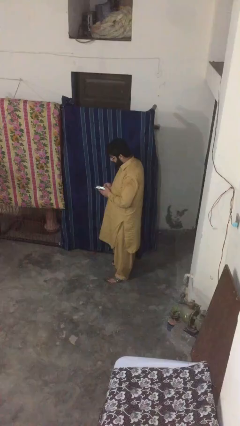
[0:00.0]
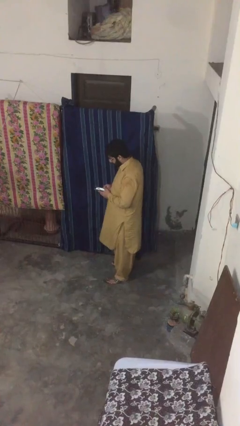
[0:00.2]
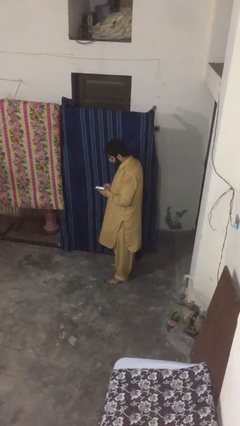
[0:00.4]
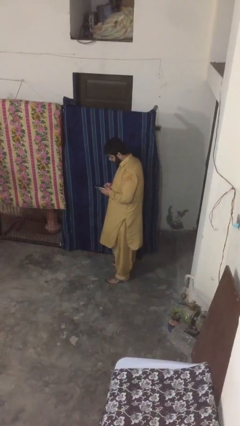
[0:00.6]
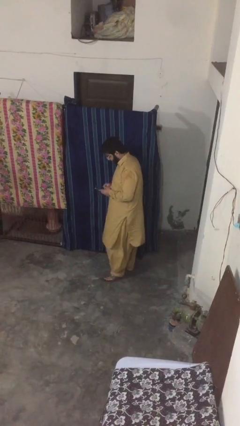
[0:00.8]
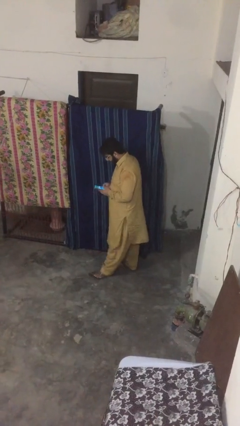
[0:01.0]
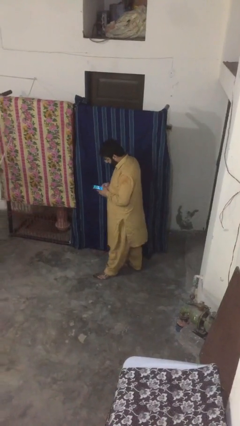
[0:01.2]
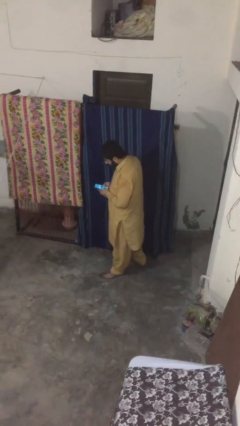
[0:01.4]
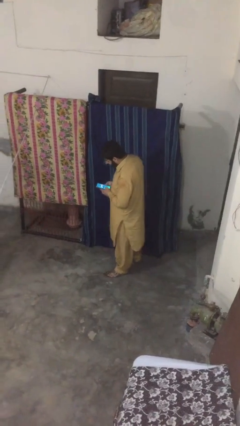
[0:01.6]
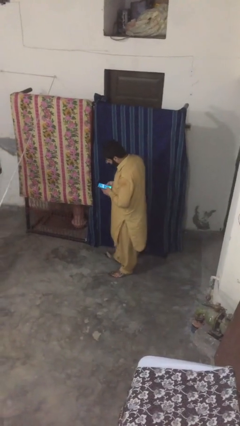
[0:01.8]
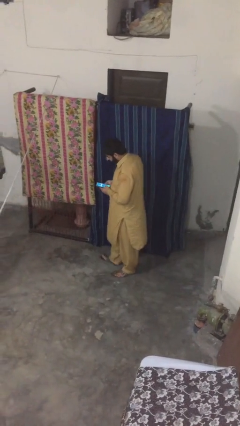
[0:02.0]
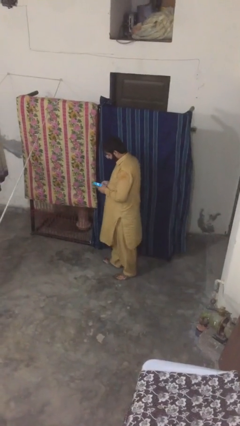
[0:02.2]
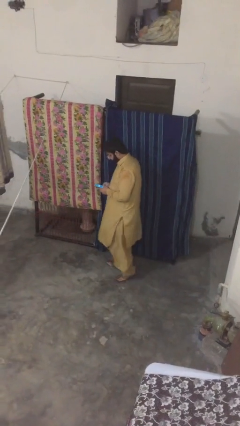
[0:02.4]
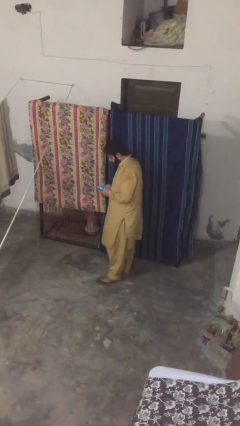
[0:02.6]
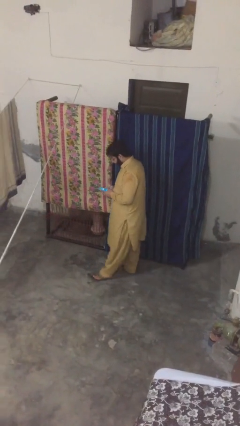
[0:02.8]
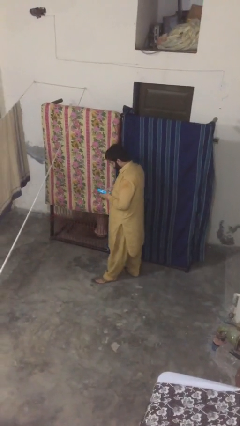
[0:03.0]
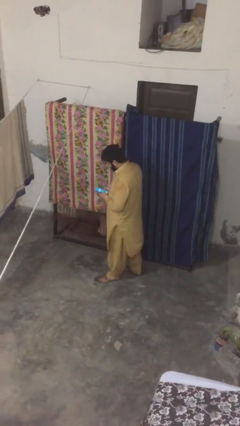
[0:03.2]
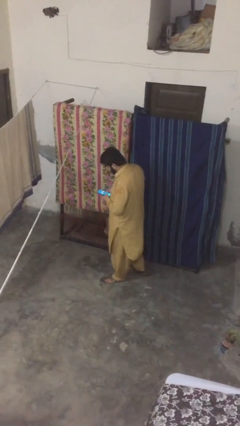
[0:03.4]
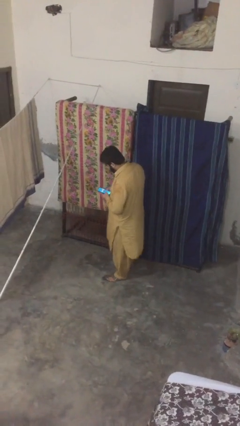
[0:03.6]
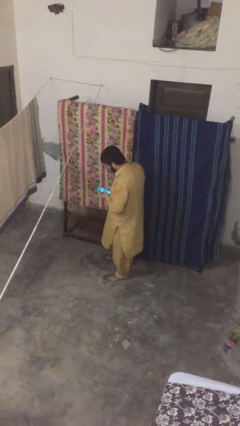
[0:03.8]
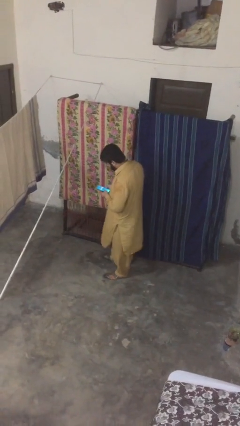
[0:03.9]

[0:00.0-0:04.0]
person texts on phone

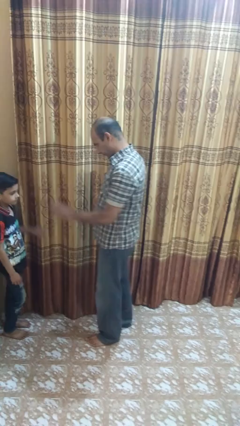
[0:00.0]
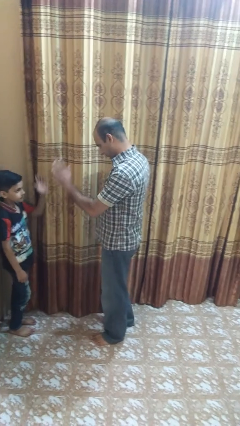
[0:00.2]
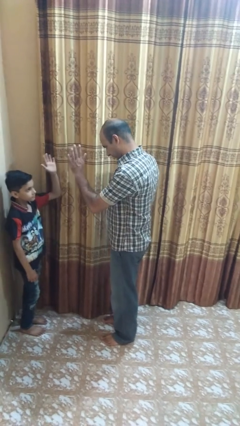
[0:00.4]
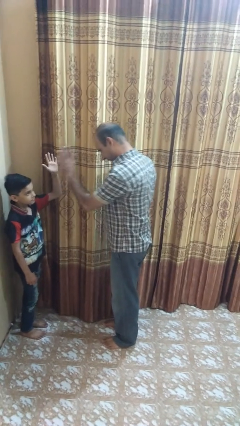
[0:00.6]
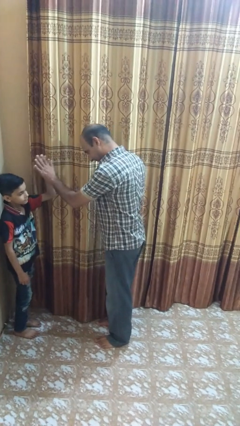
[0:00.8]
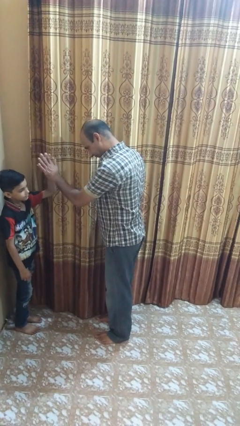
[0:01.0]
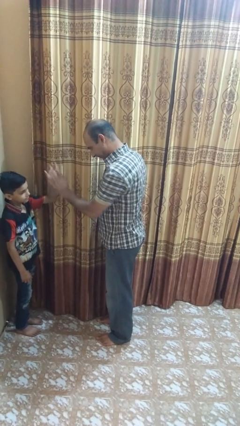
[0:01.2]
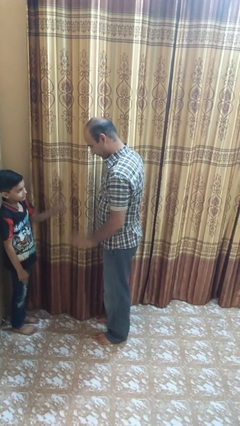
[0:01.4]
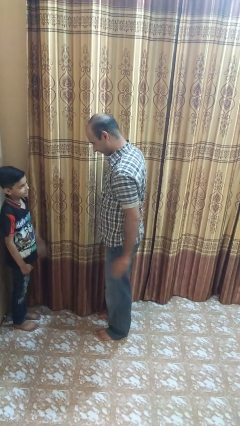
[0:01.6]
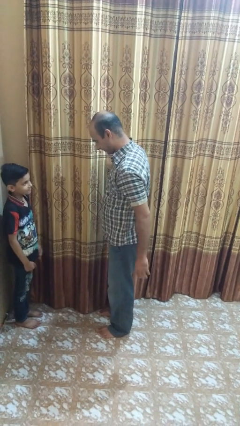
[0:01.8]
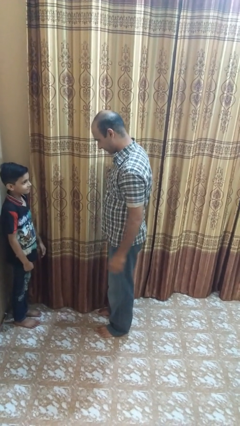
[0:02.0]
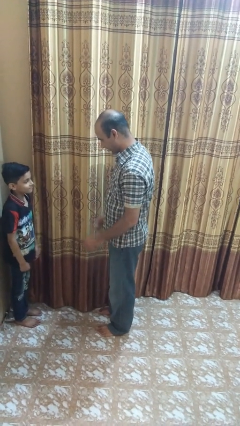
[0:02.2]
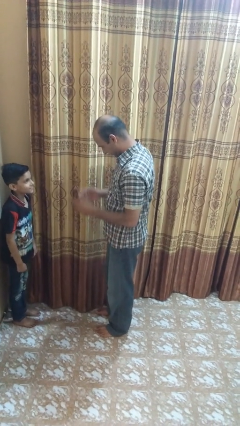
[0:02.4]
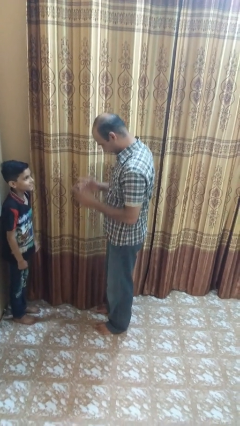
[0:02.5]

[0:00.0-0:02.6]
person highfives hand

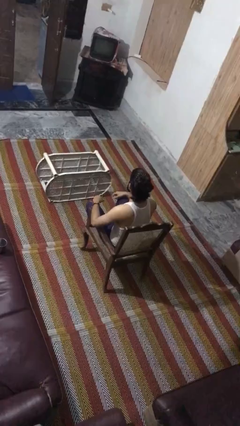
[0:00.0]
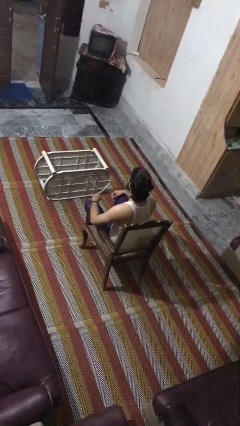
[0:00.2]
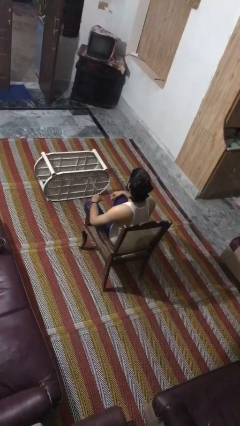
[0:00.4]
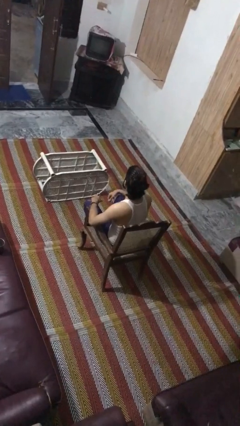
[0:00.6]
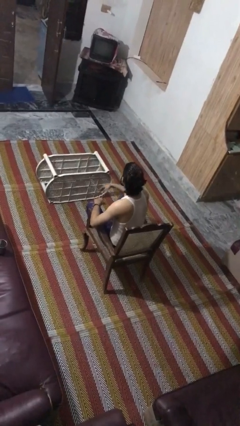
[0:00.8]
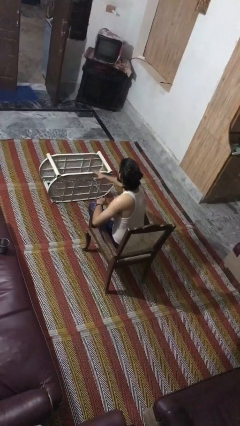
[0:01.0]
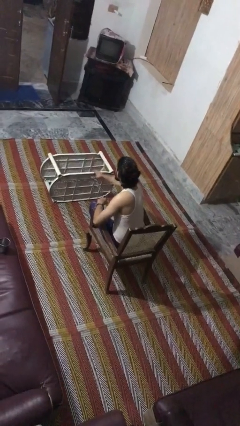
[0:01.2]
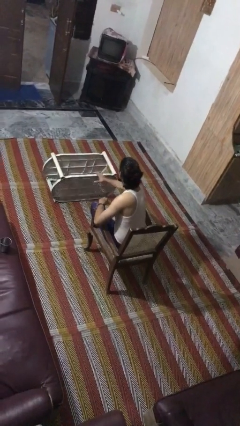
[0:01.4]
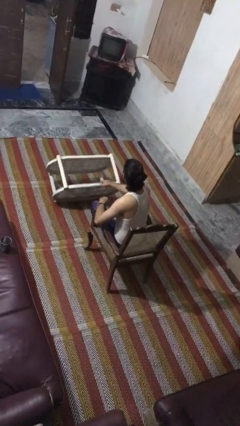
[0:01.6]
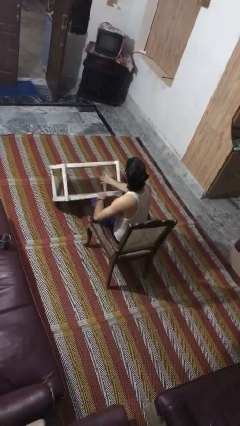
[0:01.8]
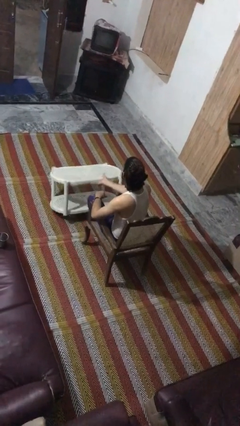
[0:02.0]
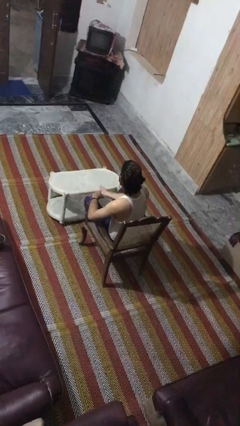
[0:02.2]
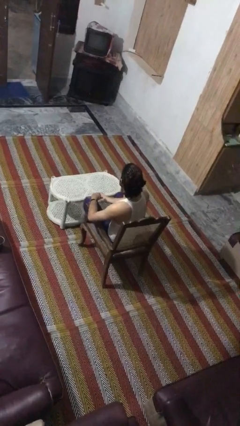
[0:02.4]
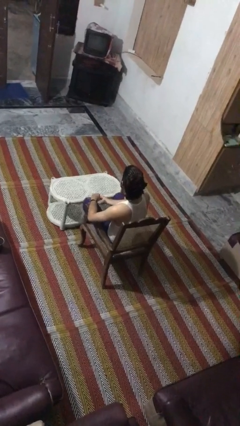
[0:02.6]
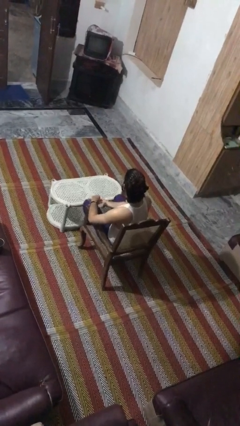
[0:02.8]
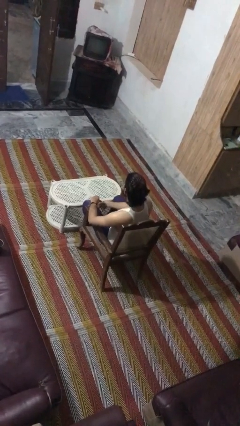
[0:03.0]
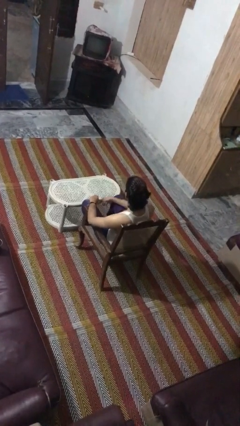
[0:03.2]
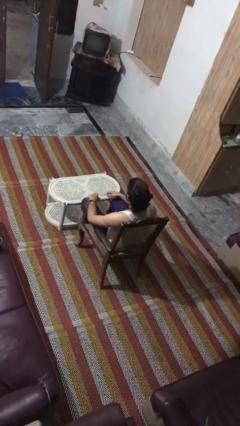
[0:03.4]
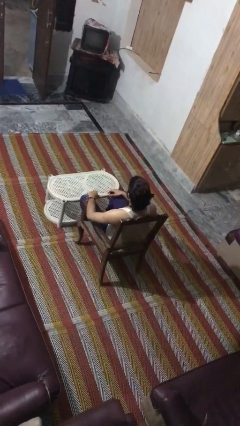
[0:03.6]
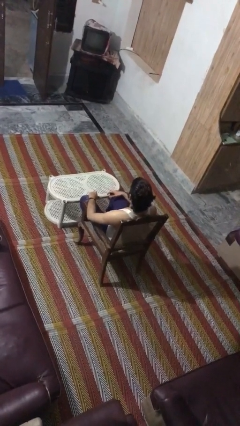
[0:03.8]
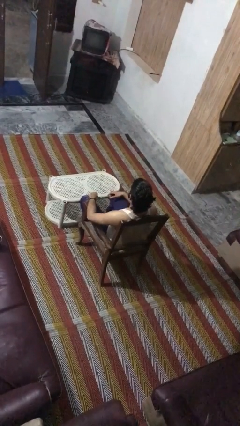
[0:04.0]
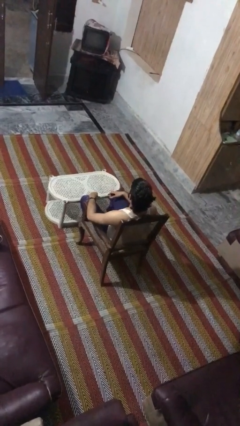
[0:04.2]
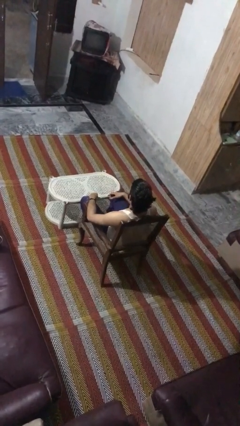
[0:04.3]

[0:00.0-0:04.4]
person sets upright furniture

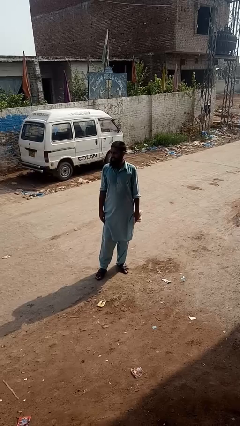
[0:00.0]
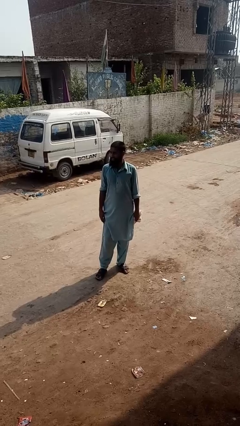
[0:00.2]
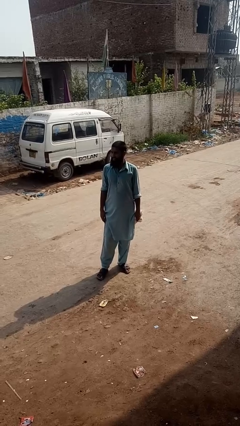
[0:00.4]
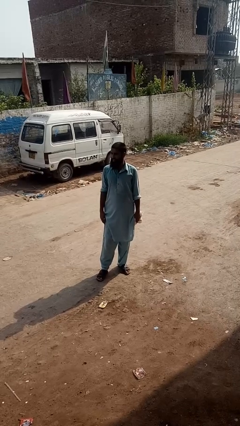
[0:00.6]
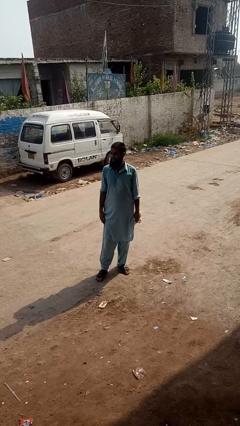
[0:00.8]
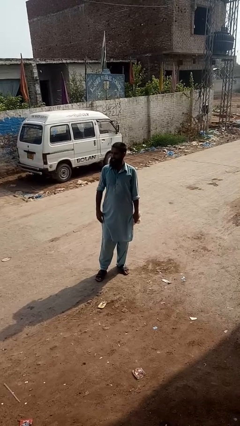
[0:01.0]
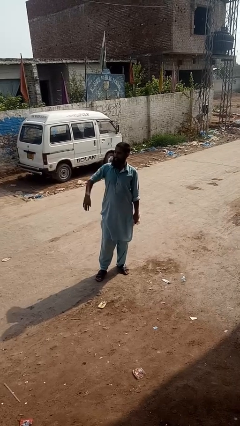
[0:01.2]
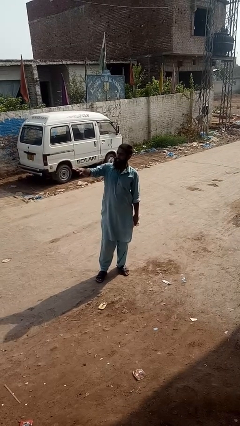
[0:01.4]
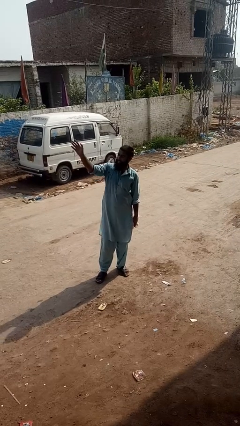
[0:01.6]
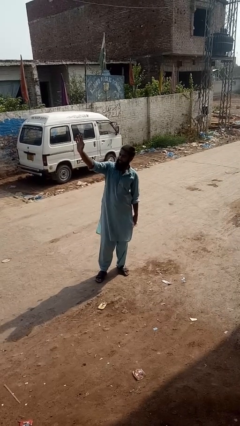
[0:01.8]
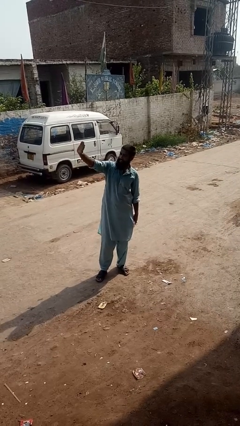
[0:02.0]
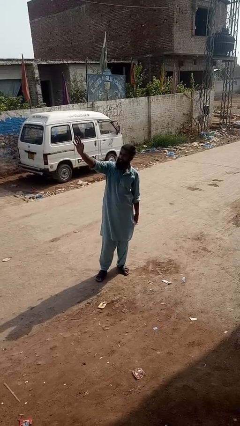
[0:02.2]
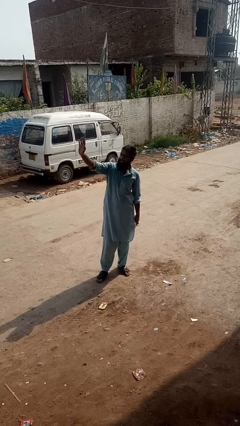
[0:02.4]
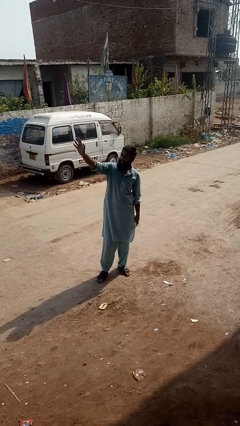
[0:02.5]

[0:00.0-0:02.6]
person waves at person

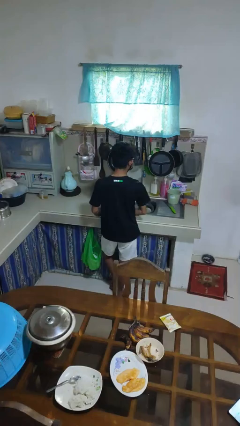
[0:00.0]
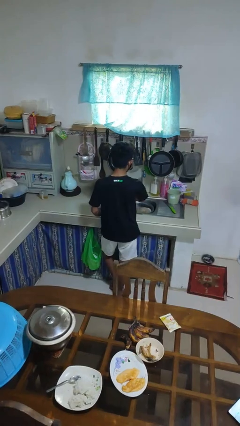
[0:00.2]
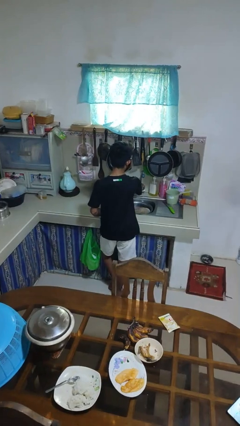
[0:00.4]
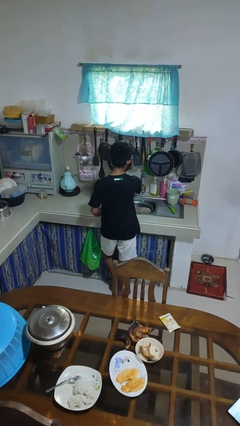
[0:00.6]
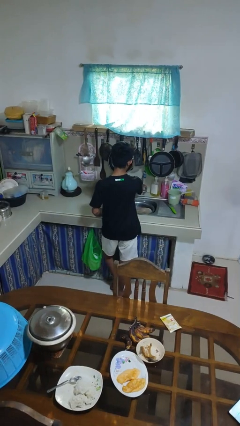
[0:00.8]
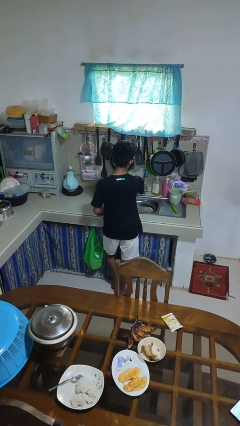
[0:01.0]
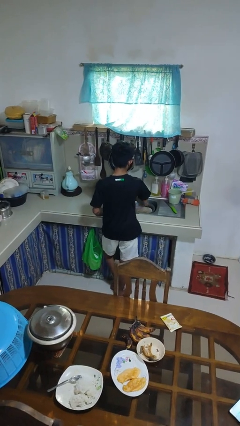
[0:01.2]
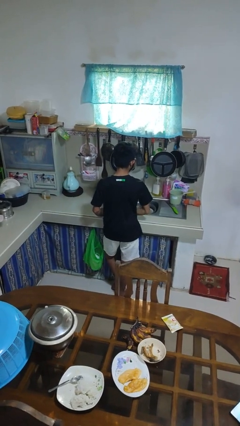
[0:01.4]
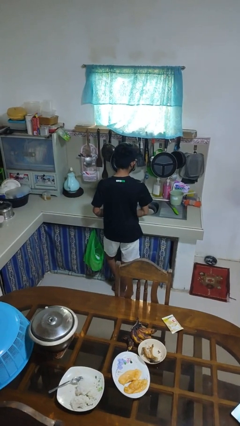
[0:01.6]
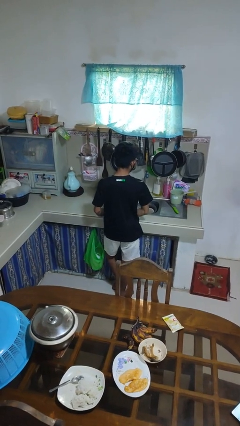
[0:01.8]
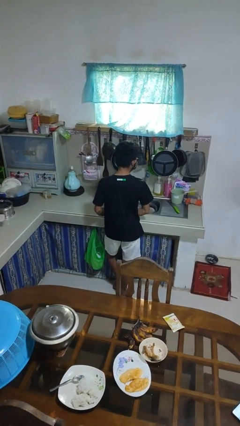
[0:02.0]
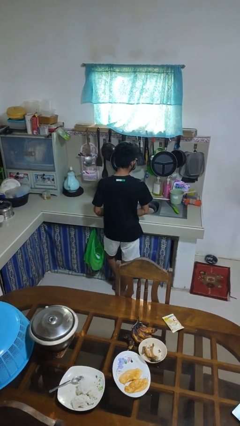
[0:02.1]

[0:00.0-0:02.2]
person opens clothes washer

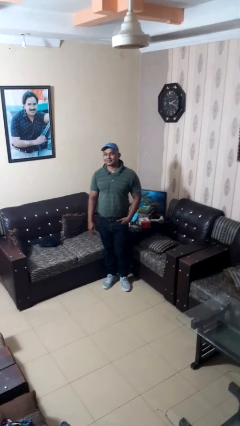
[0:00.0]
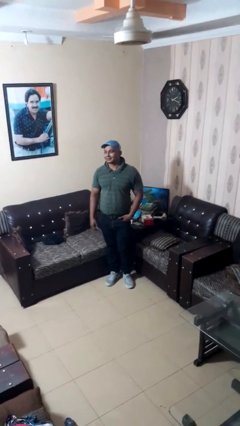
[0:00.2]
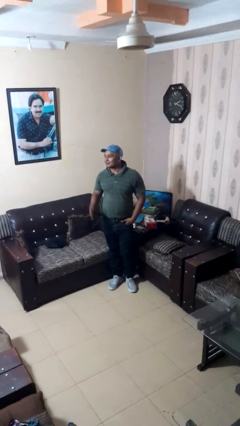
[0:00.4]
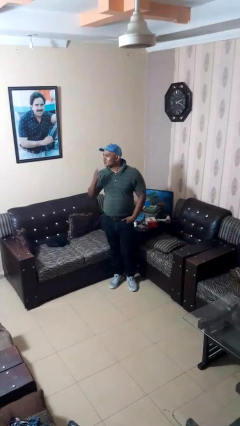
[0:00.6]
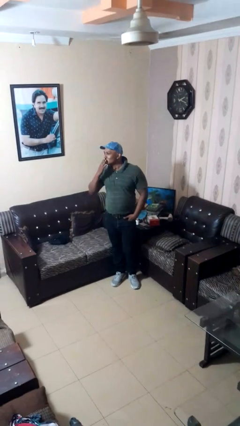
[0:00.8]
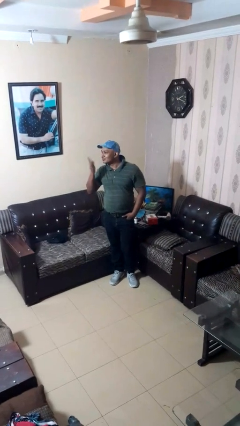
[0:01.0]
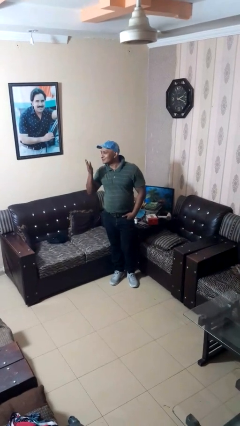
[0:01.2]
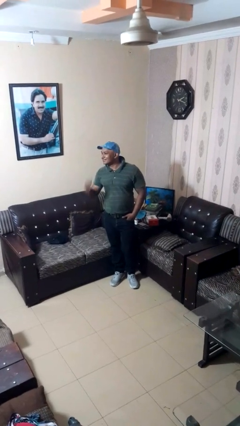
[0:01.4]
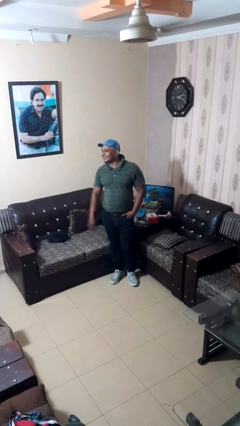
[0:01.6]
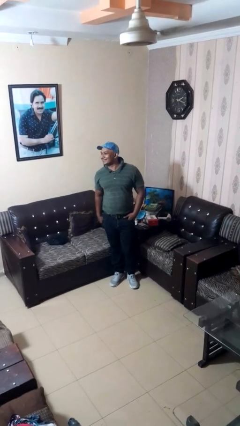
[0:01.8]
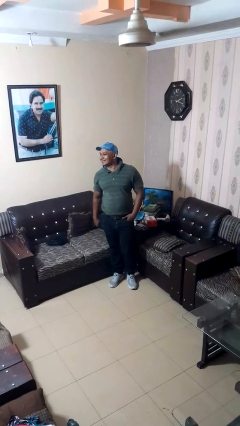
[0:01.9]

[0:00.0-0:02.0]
person gestures blow kiss
